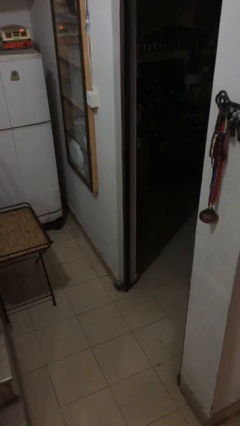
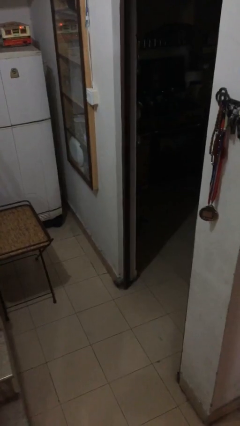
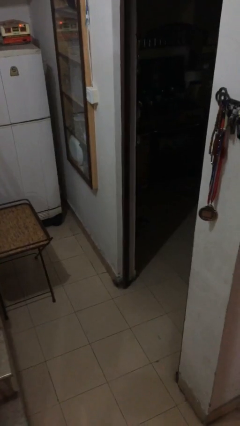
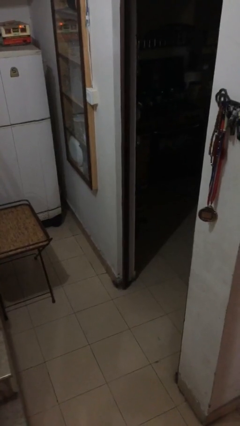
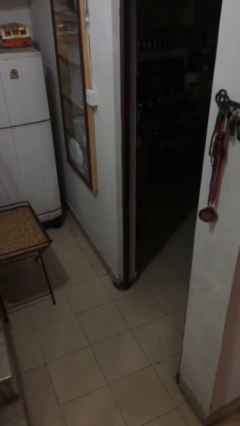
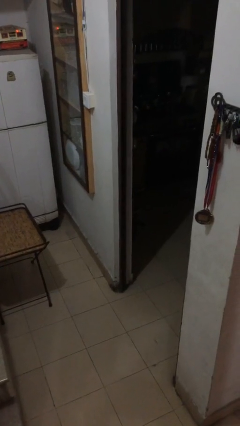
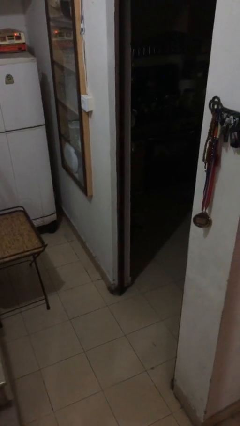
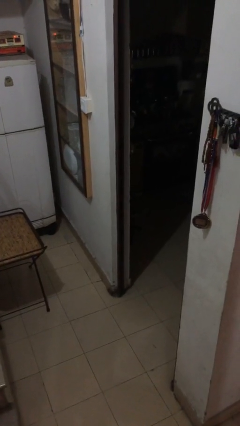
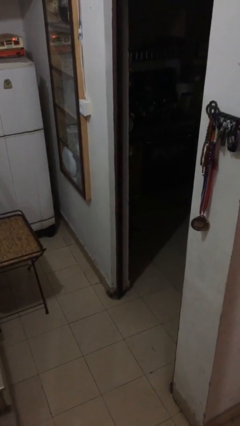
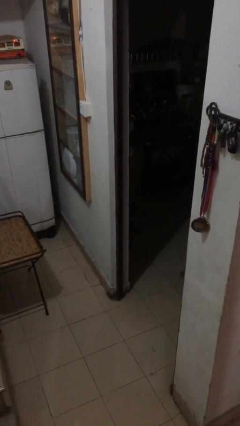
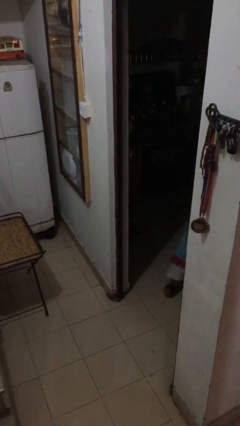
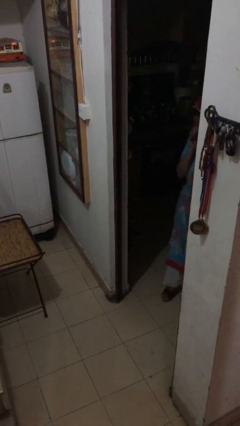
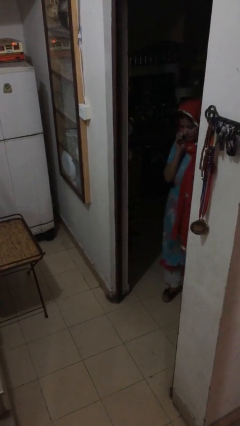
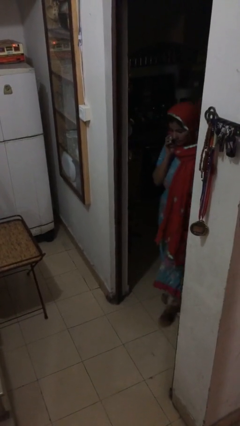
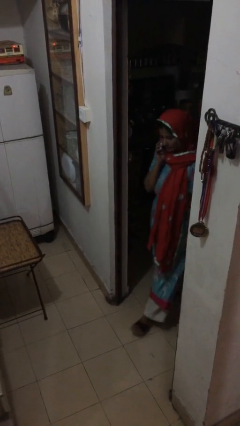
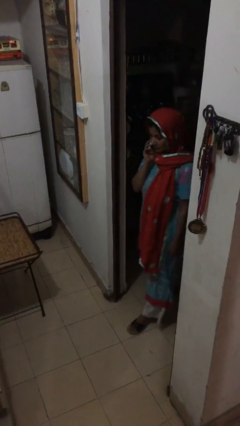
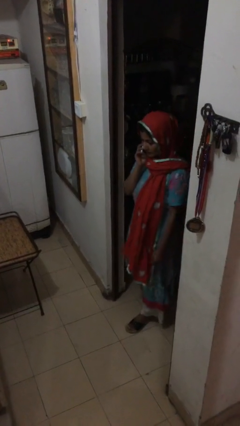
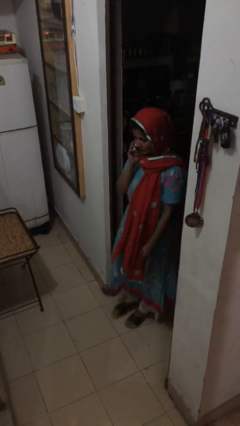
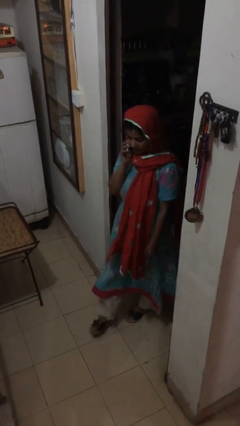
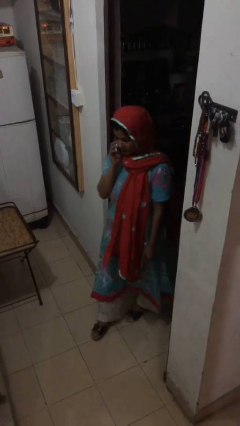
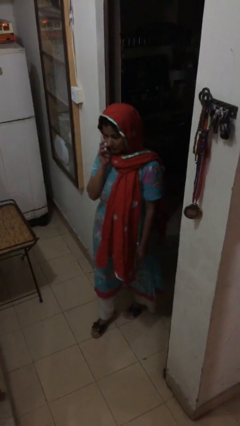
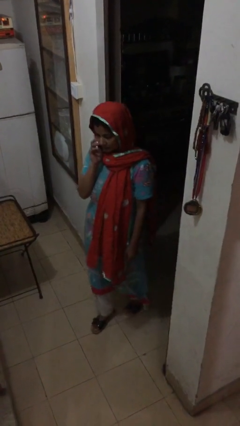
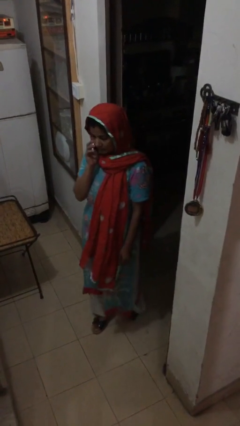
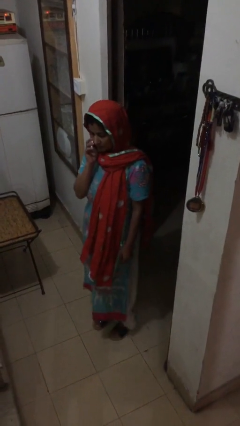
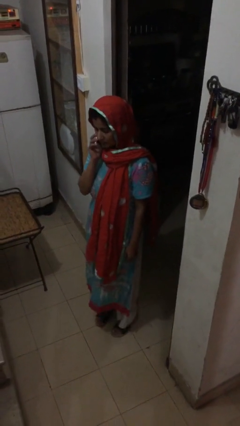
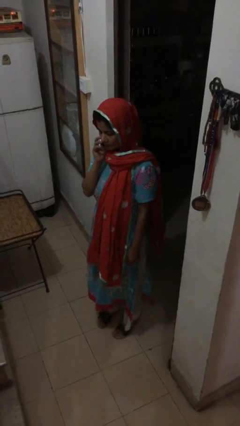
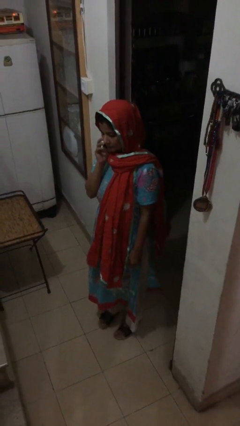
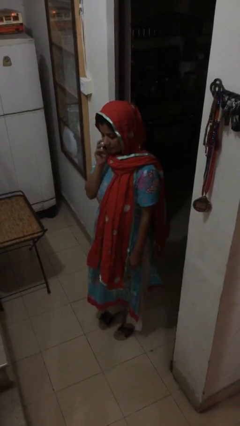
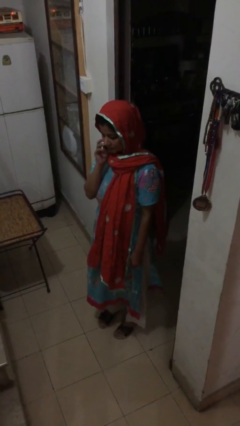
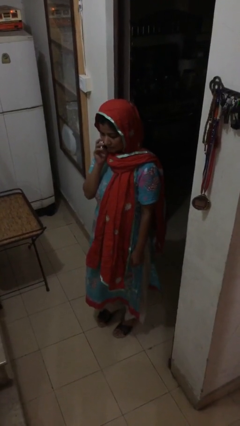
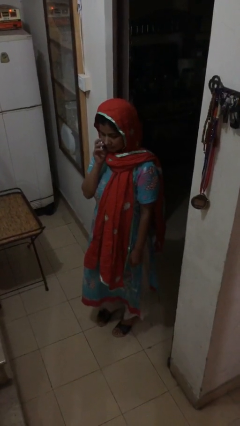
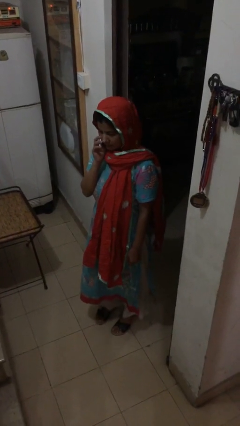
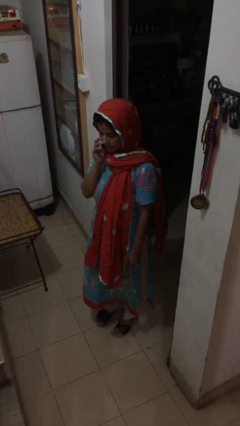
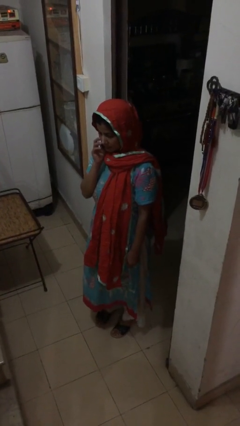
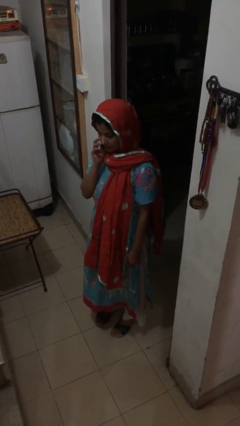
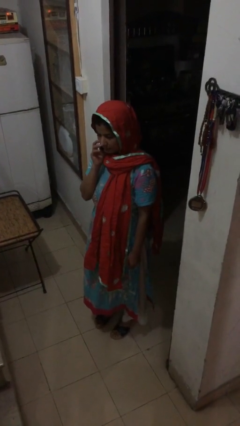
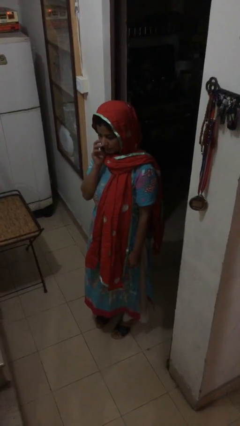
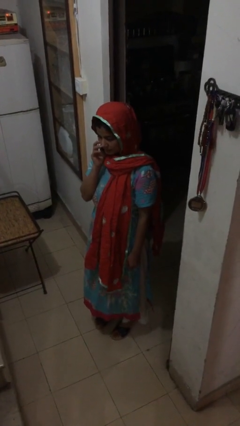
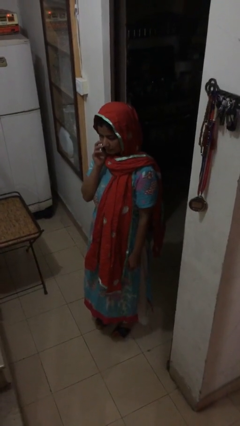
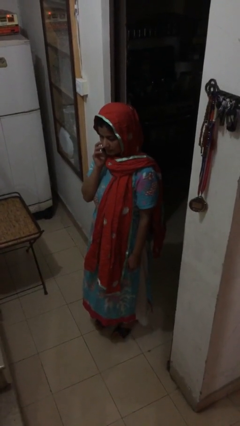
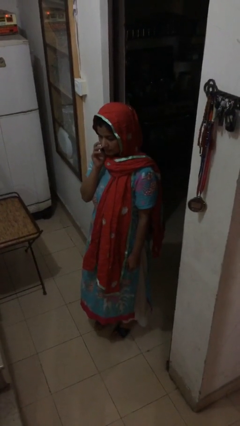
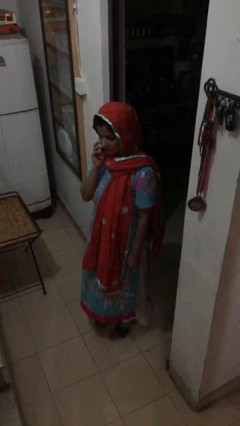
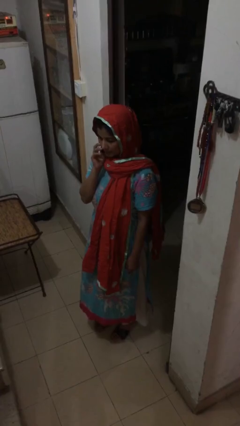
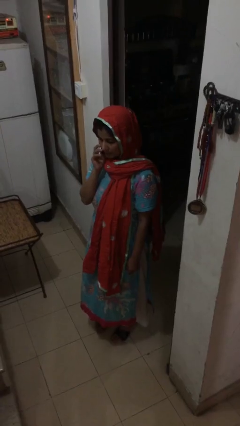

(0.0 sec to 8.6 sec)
person enters scene through structure

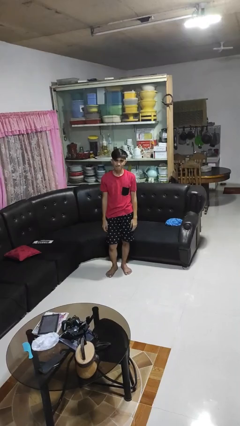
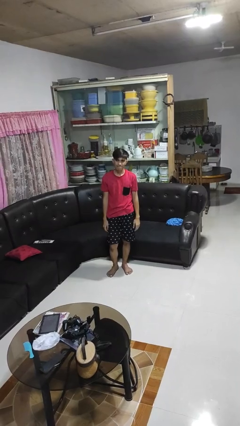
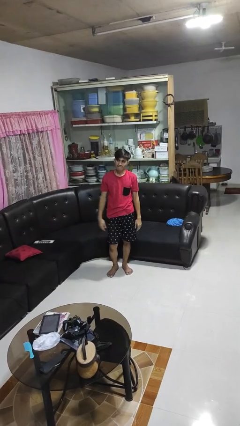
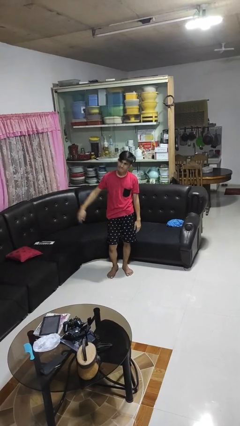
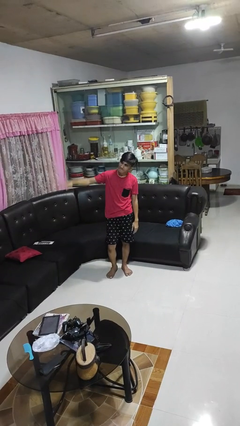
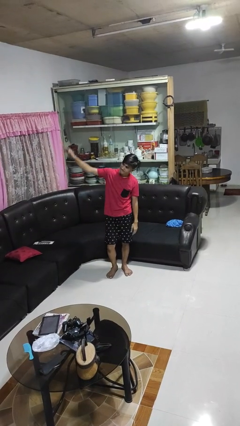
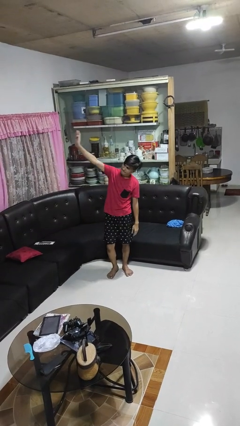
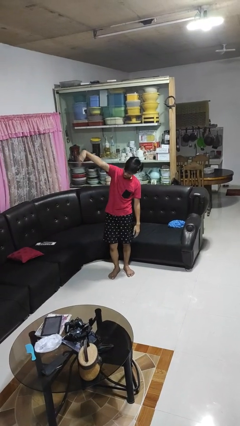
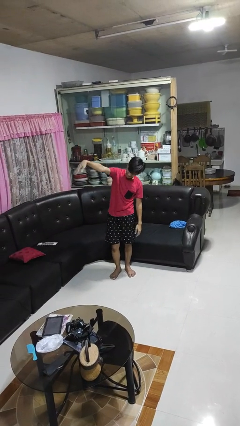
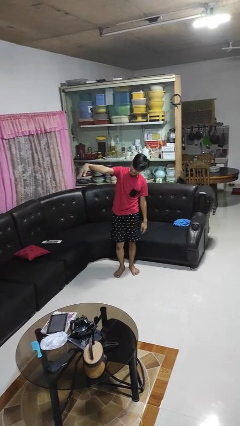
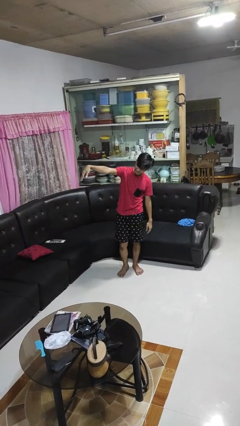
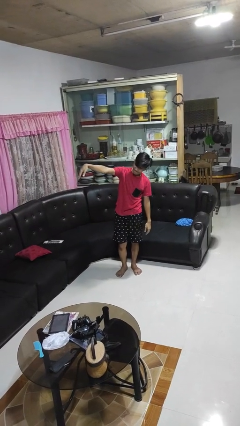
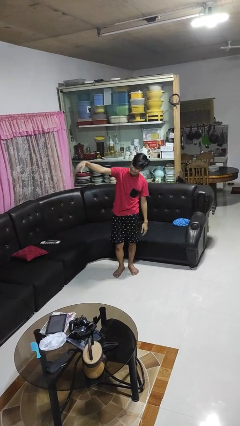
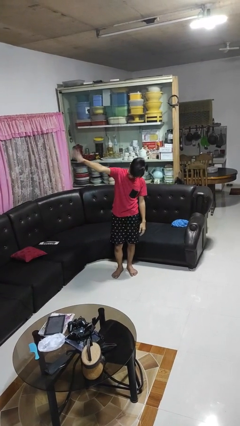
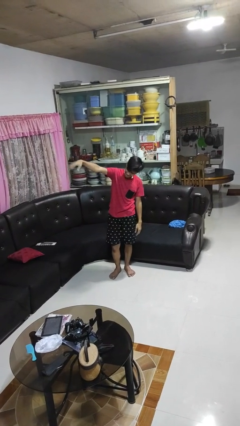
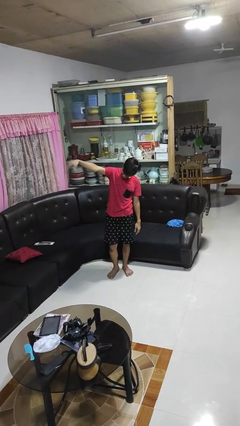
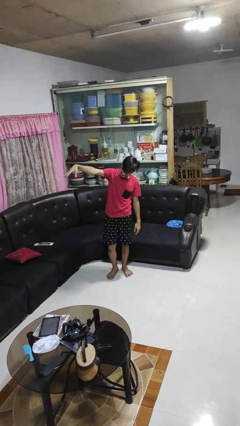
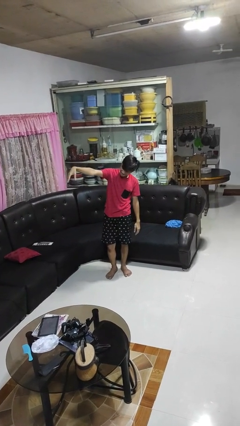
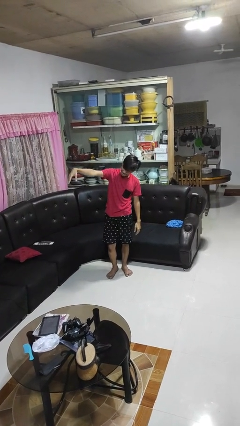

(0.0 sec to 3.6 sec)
person gestures come here

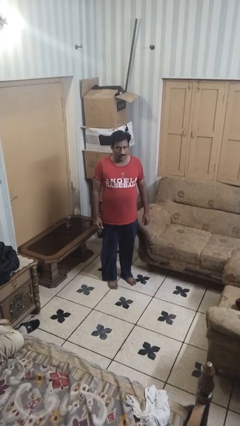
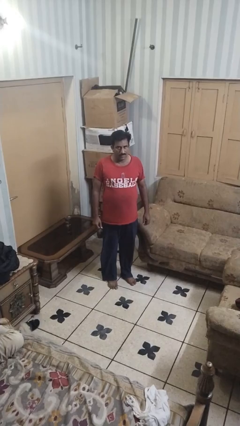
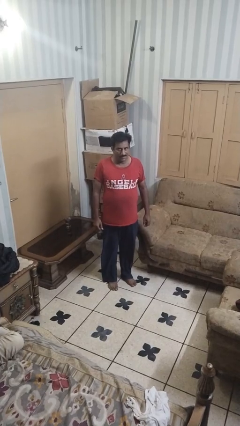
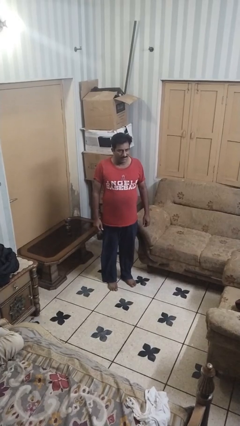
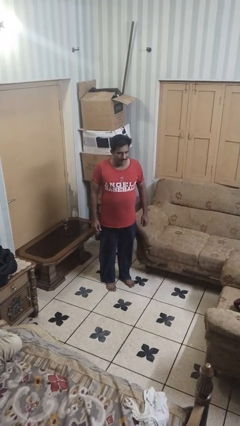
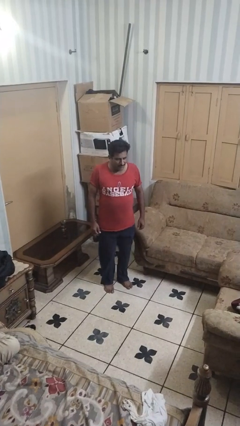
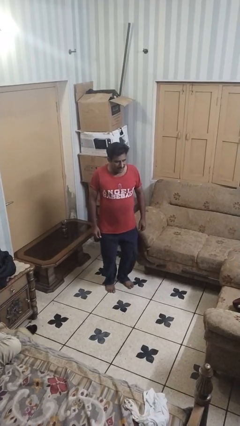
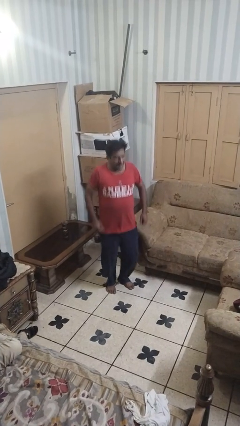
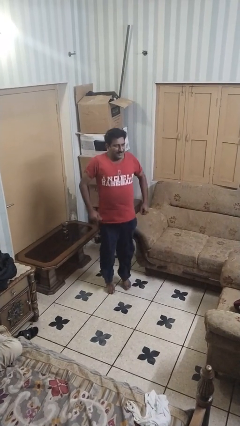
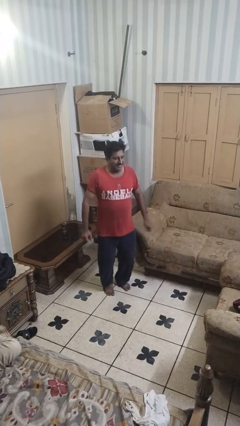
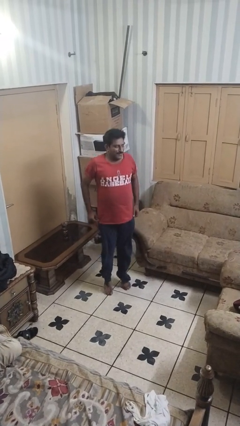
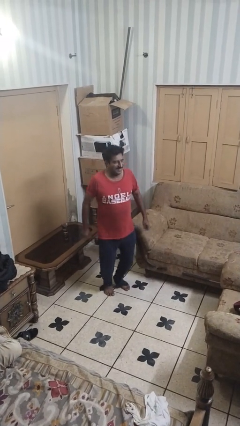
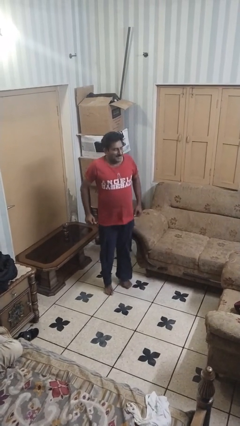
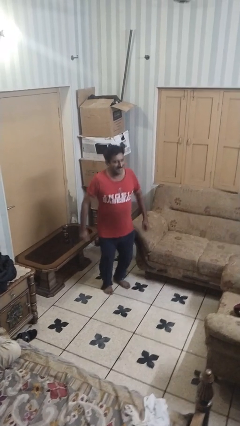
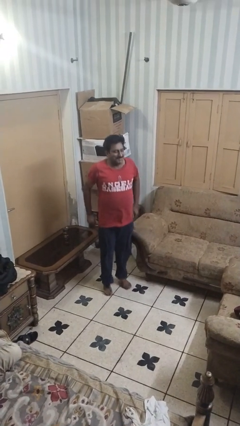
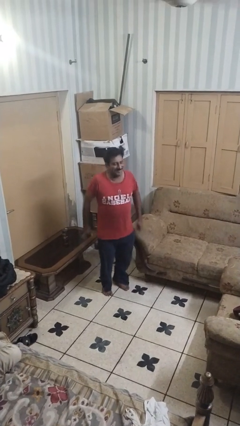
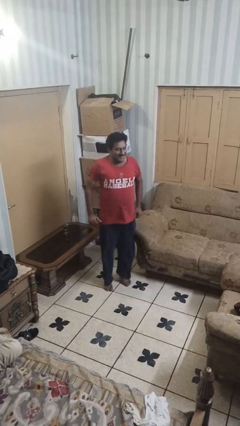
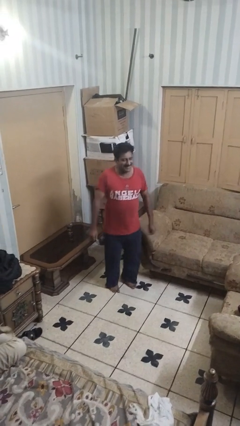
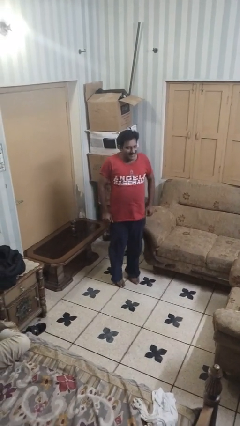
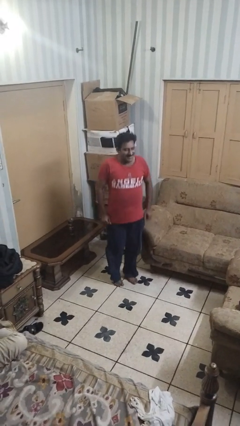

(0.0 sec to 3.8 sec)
person jumps

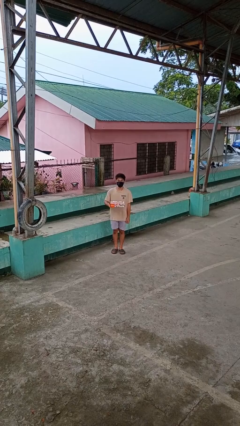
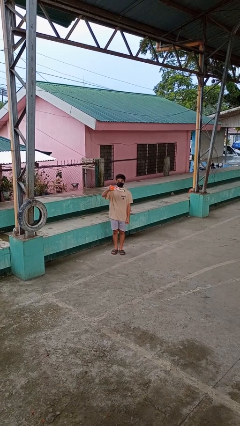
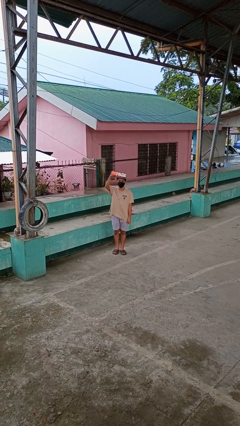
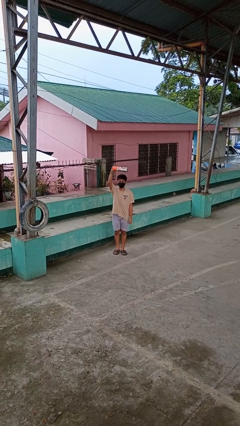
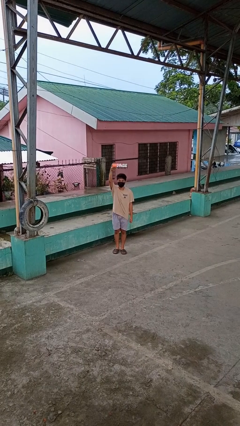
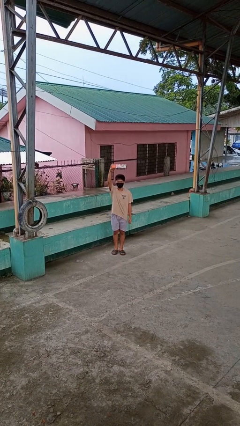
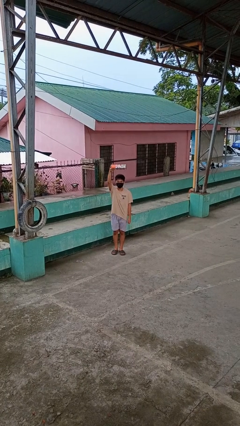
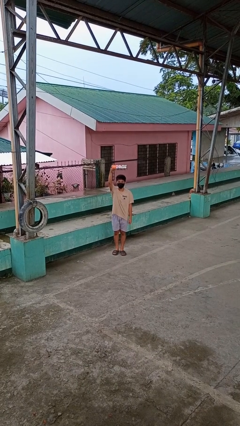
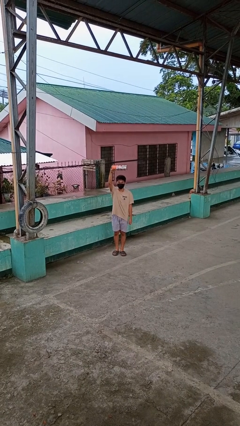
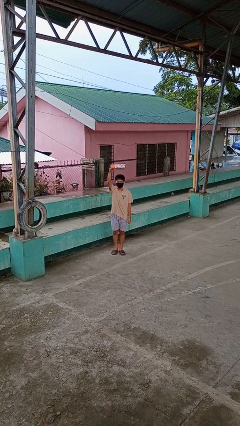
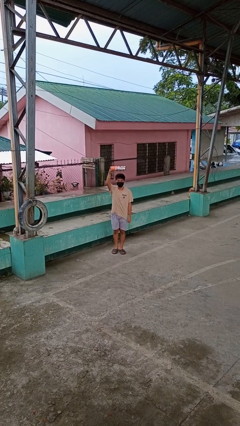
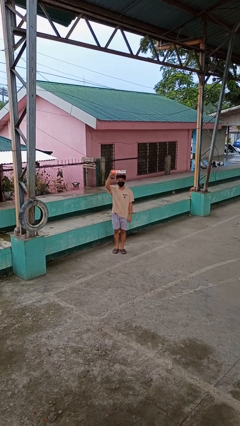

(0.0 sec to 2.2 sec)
person holds object above head
